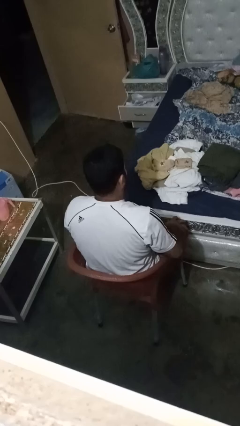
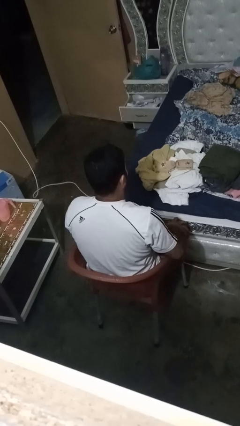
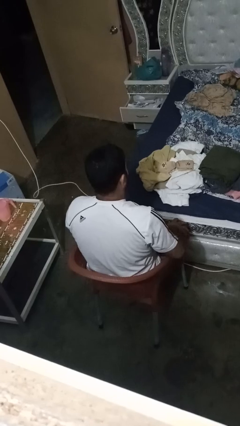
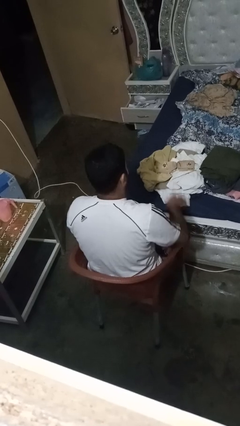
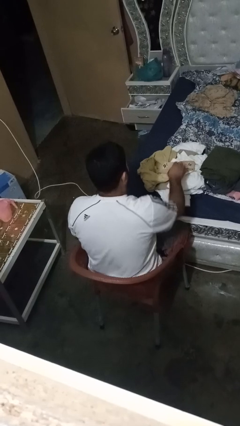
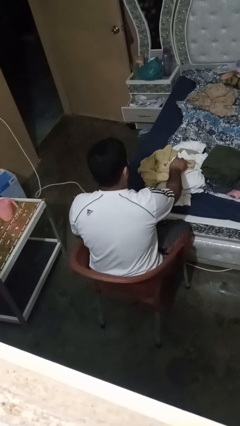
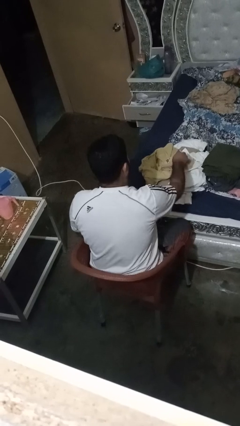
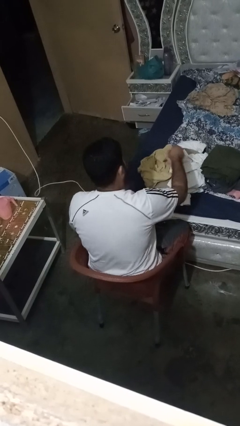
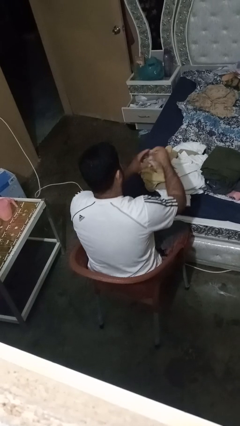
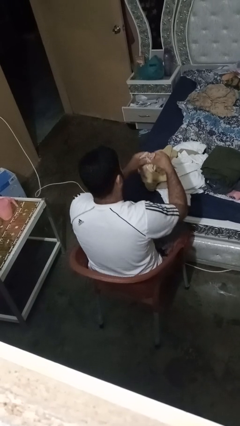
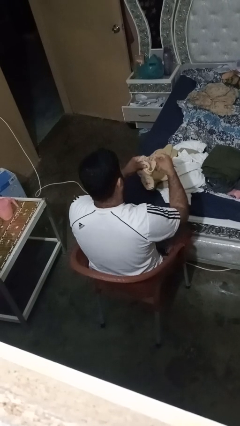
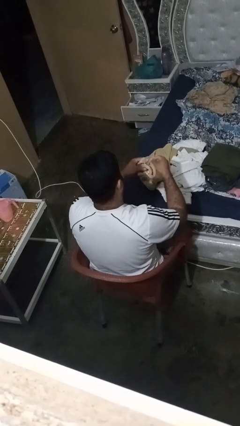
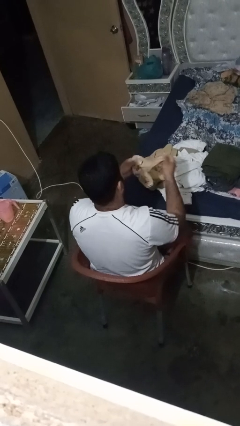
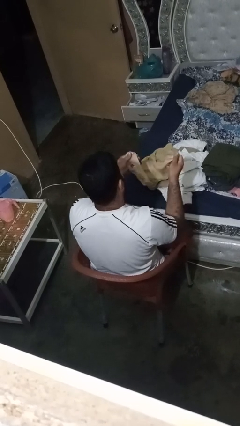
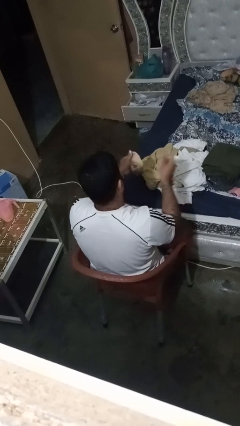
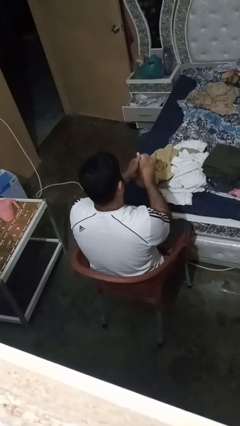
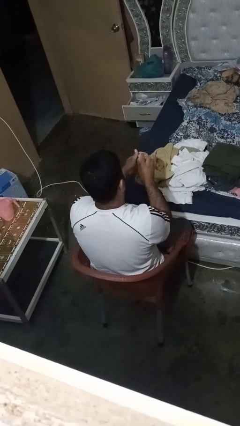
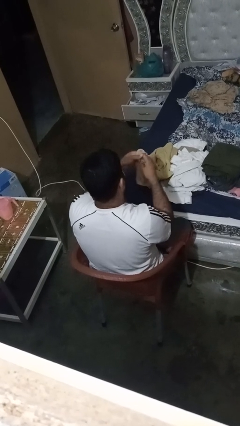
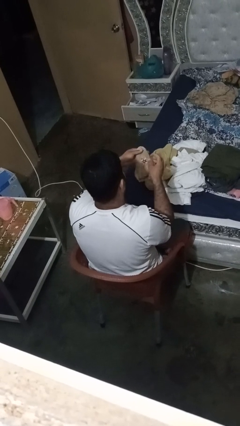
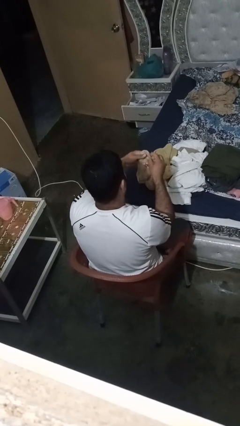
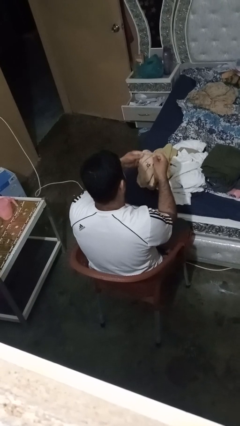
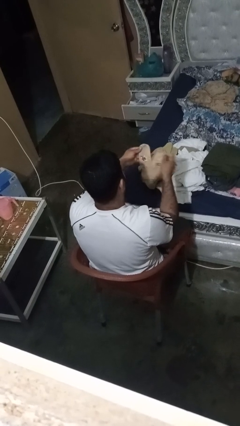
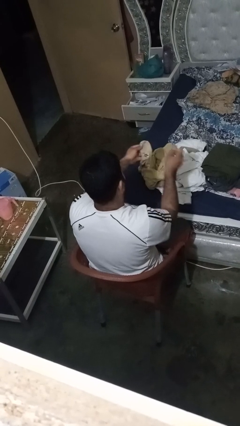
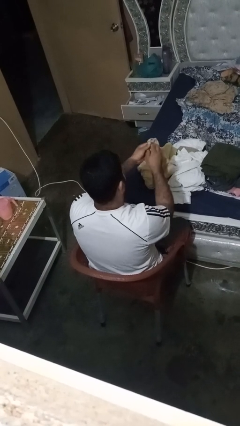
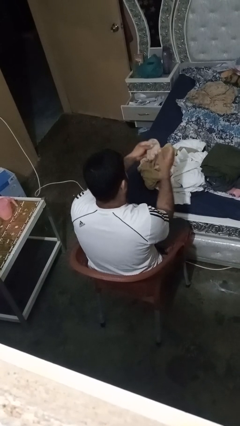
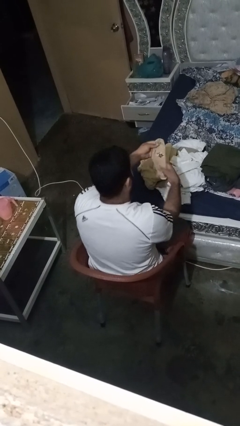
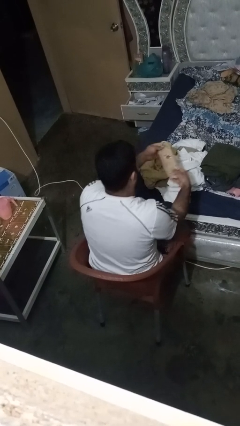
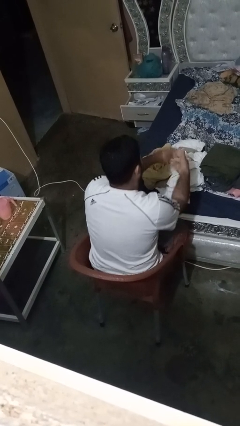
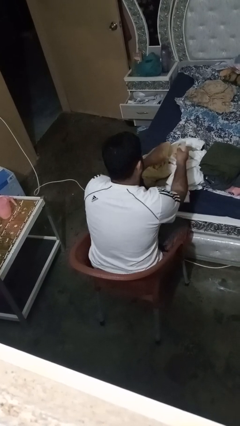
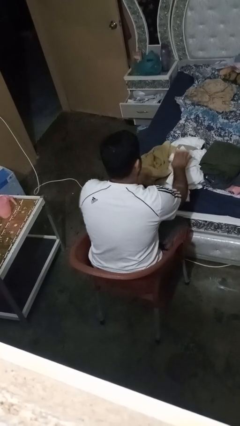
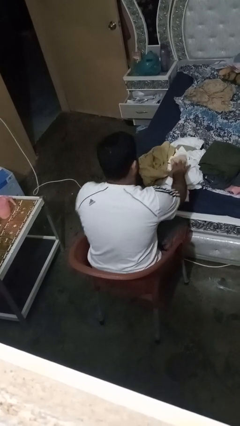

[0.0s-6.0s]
person folds socks

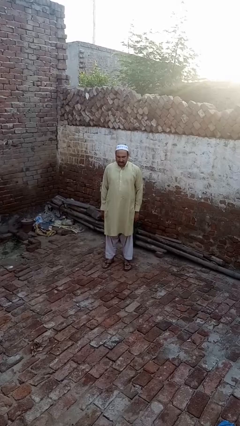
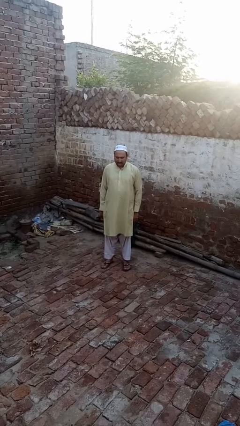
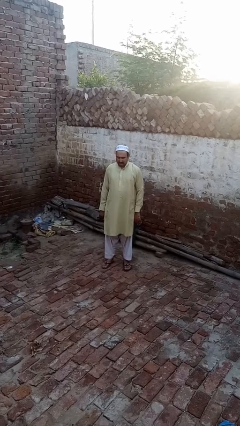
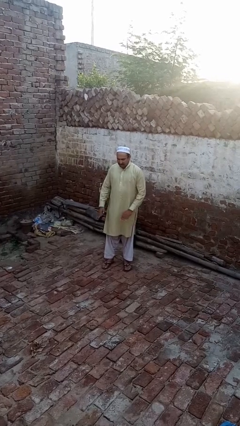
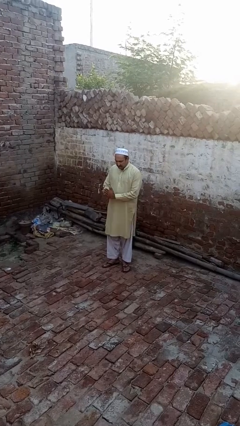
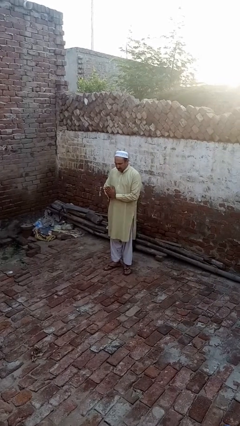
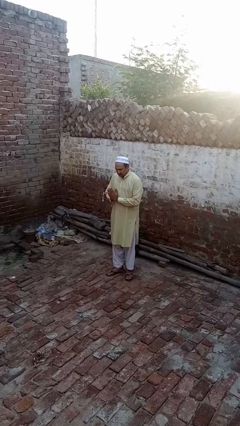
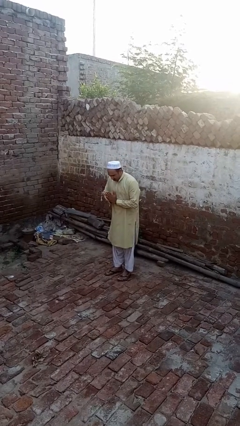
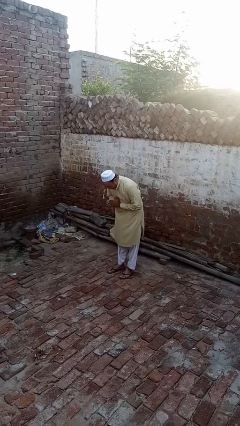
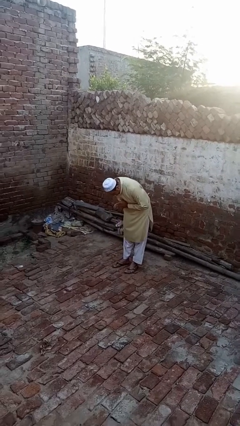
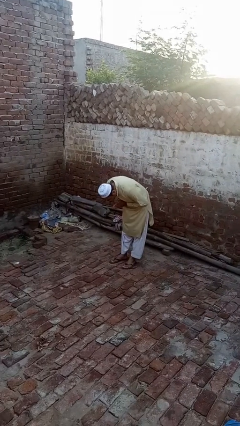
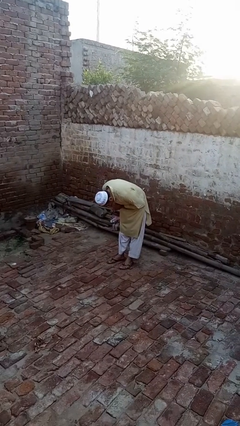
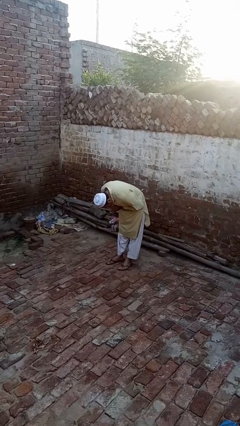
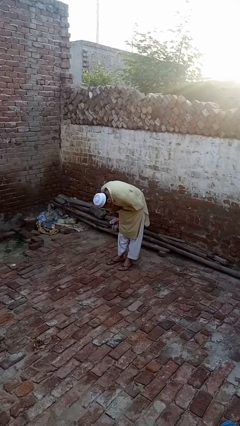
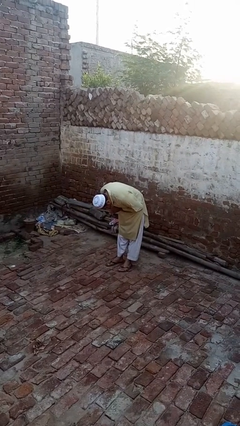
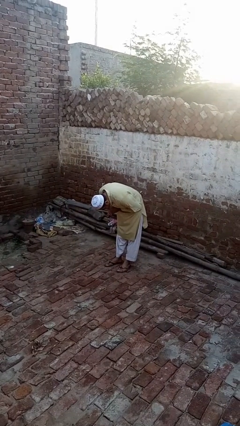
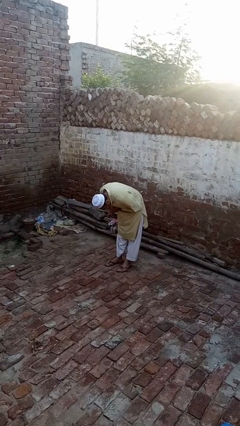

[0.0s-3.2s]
person bows

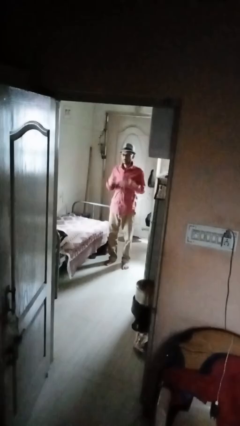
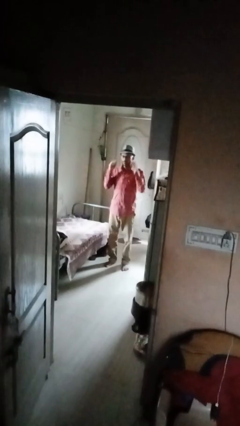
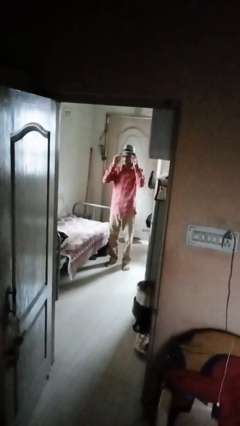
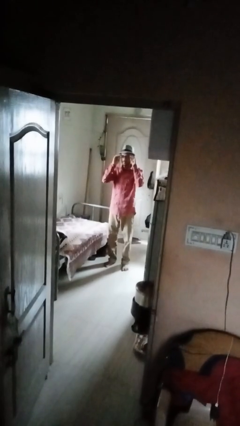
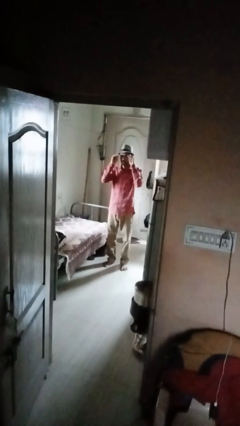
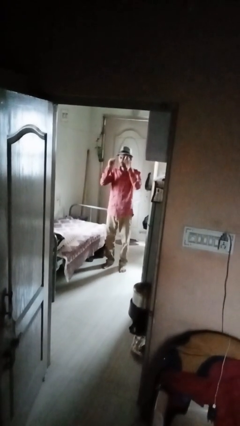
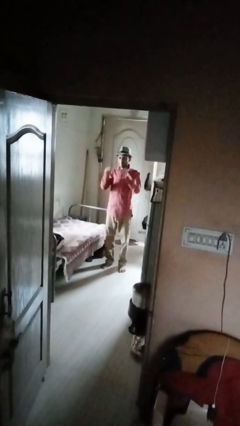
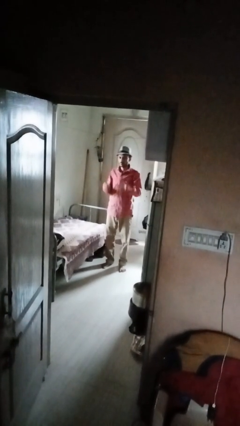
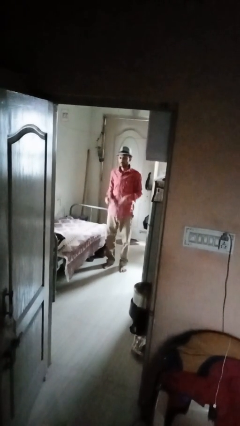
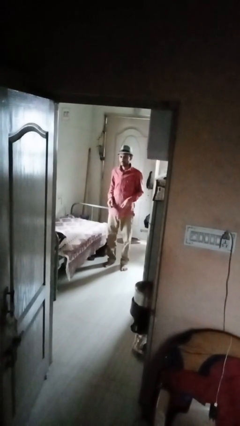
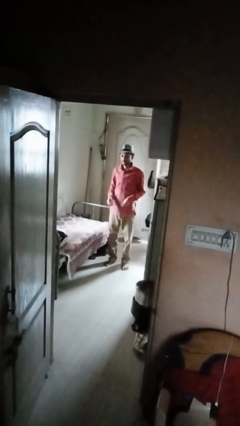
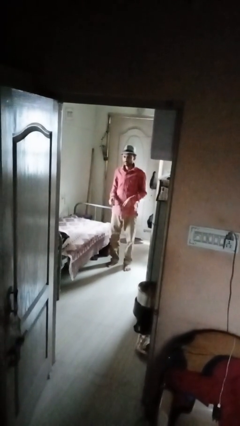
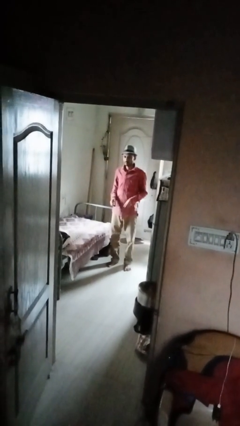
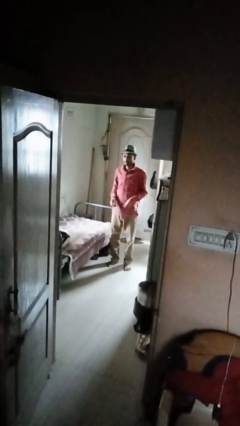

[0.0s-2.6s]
person takes off glasses

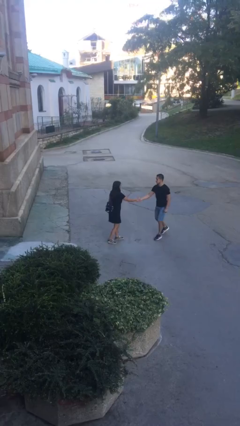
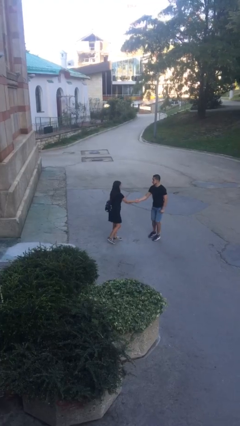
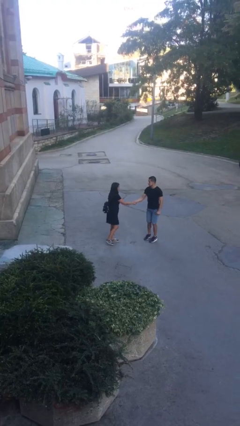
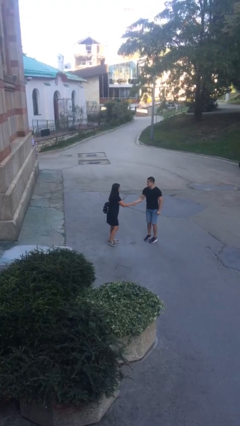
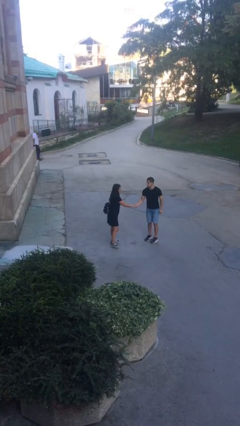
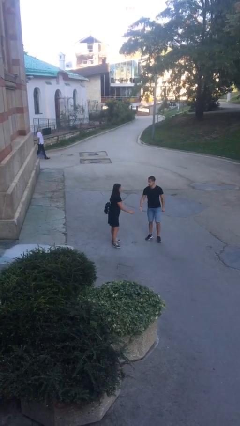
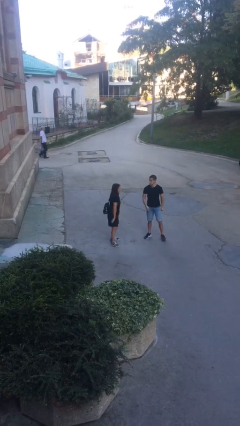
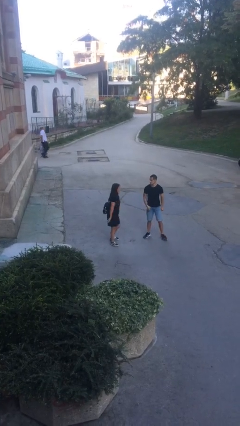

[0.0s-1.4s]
person shakes hand

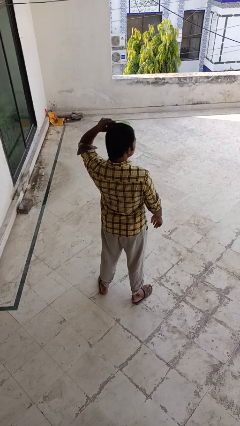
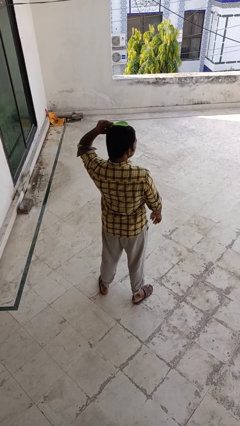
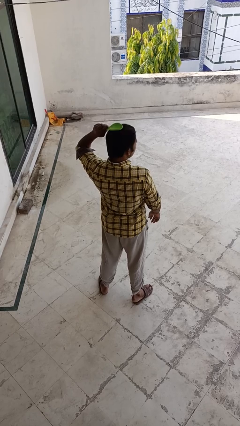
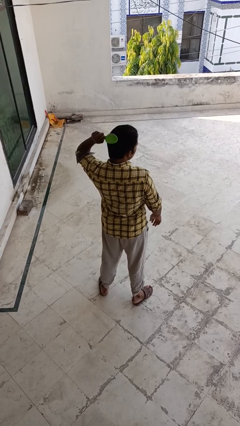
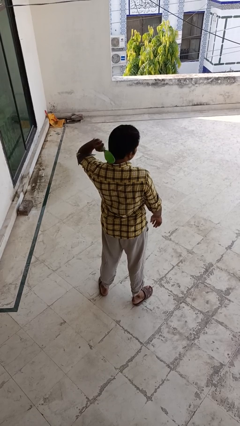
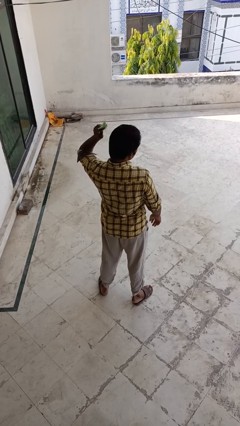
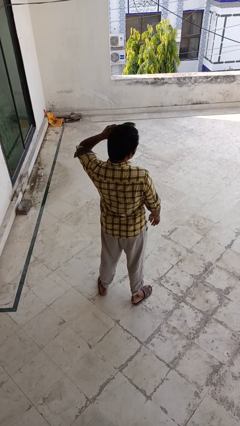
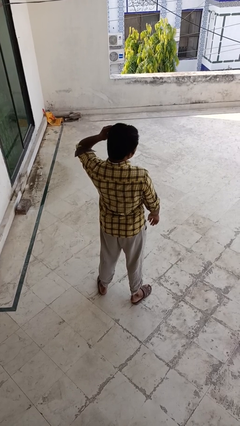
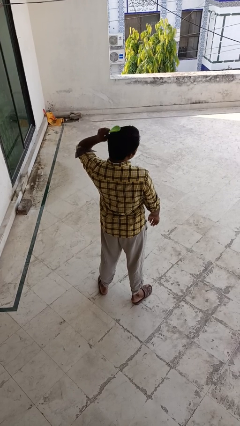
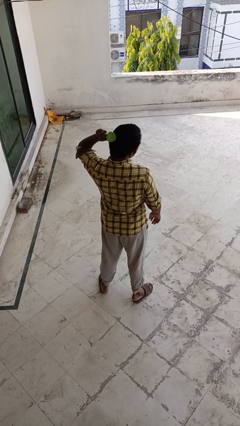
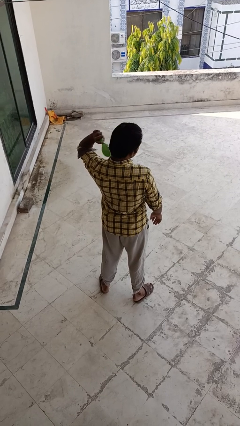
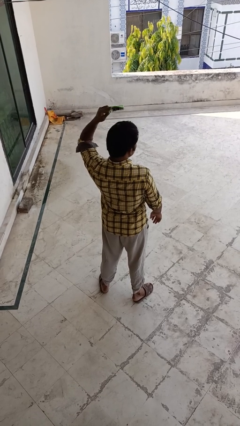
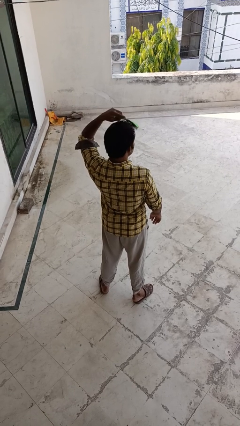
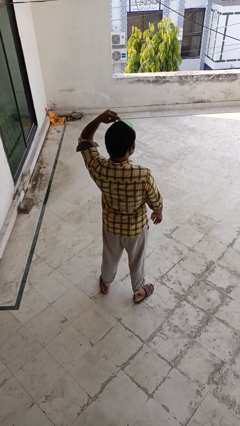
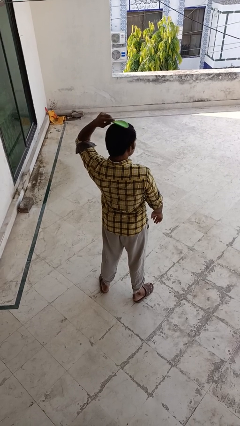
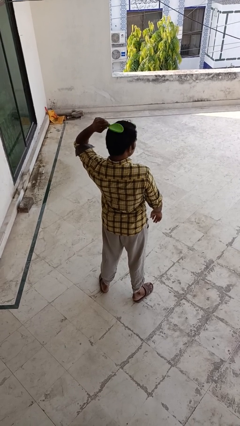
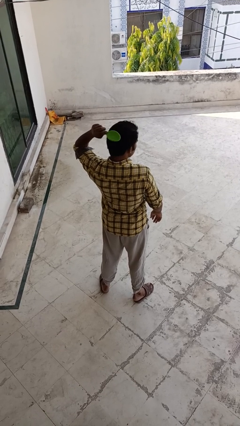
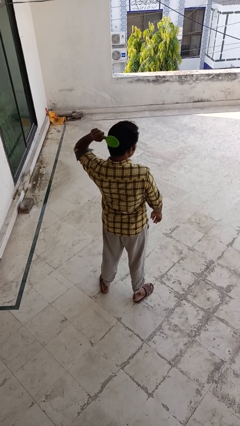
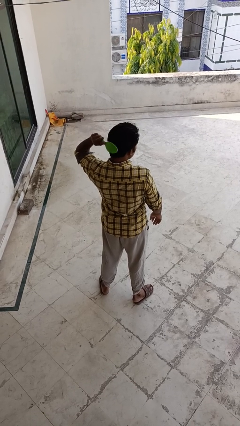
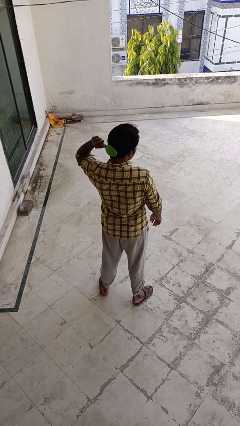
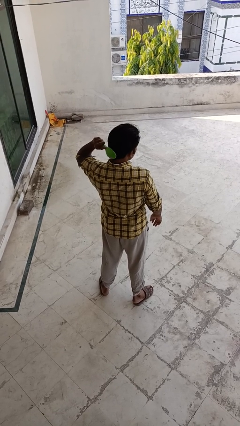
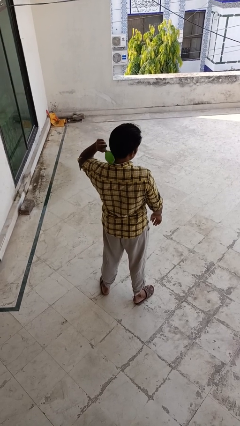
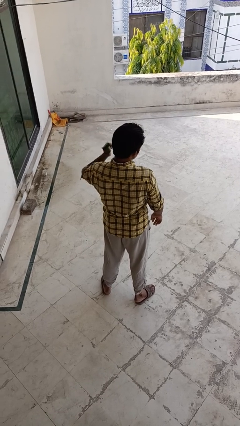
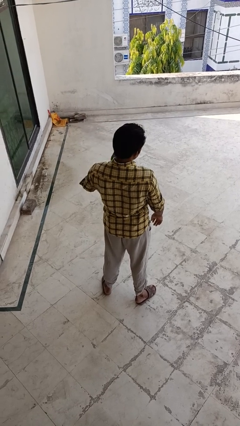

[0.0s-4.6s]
person brushes hair

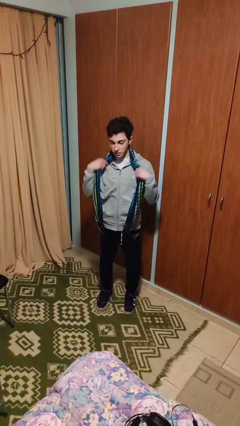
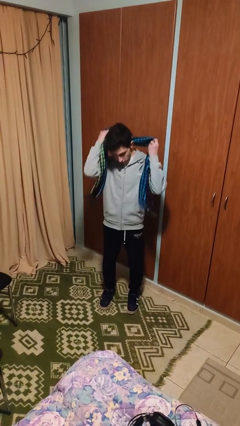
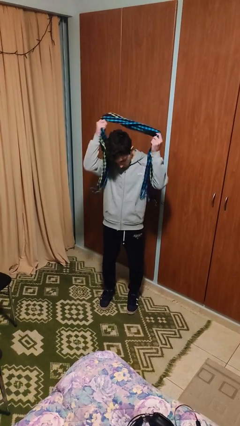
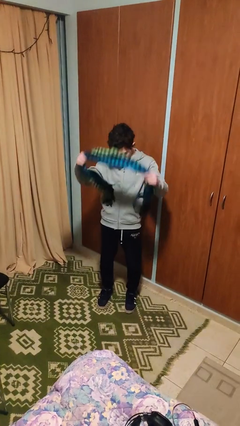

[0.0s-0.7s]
person takes off scarf
